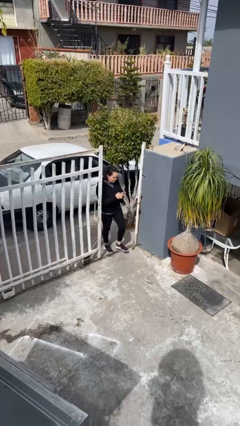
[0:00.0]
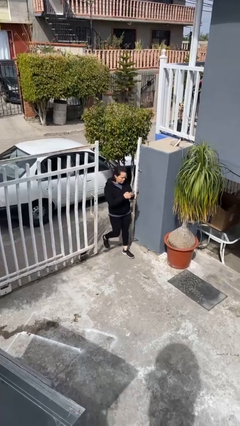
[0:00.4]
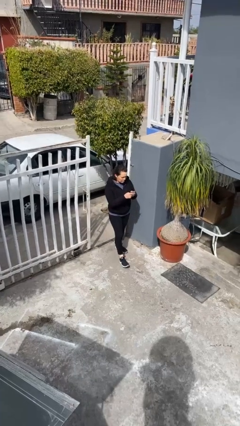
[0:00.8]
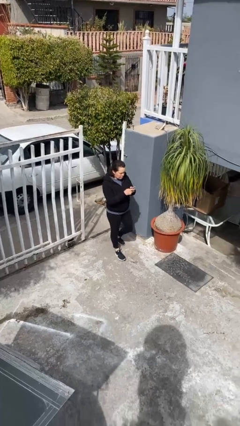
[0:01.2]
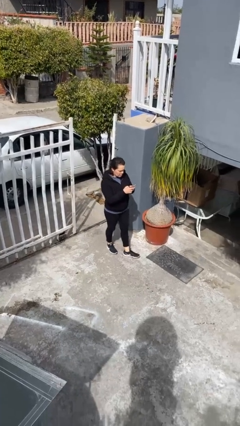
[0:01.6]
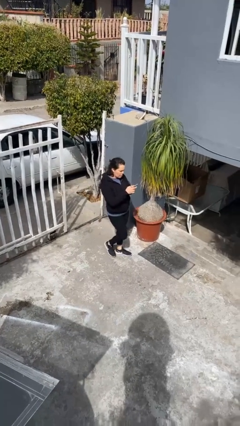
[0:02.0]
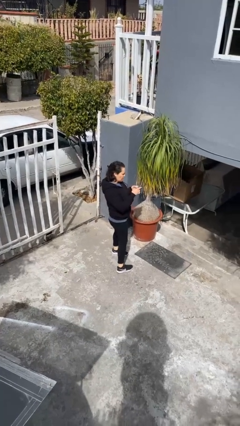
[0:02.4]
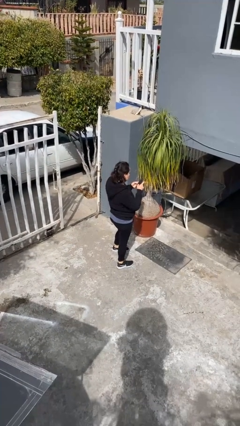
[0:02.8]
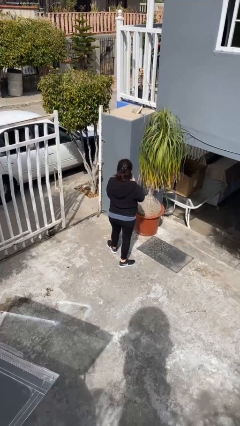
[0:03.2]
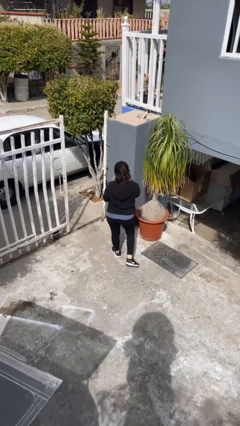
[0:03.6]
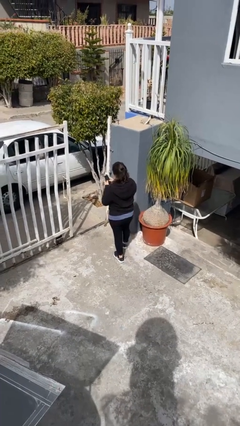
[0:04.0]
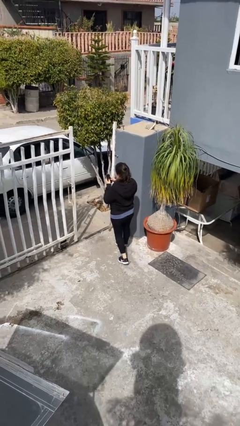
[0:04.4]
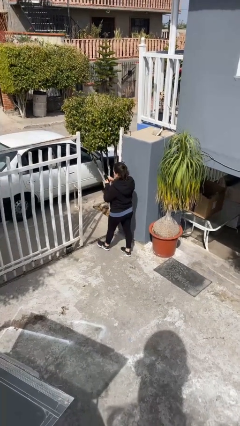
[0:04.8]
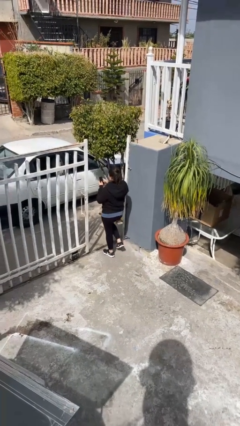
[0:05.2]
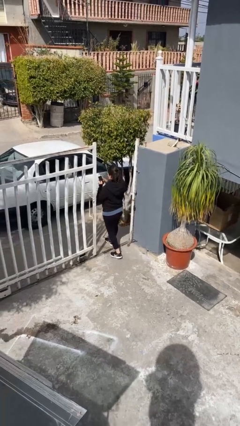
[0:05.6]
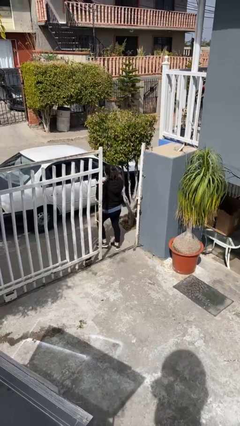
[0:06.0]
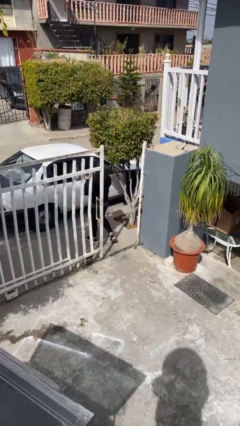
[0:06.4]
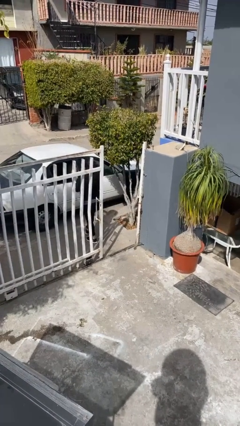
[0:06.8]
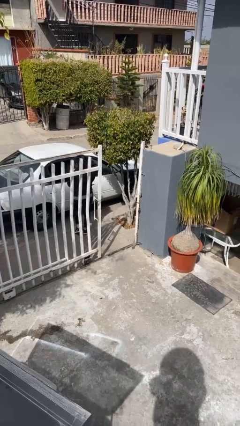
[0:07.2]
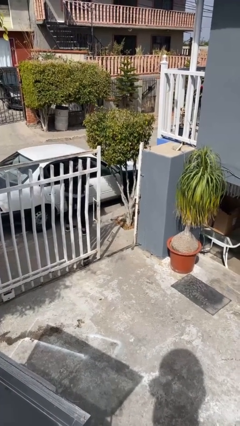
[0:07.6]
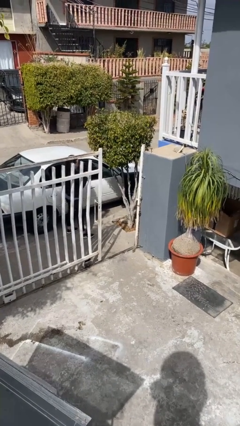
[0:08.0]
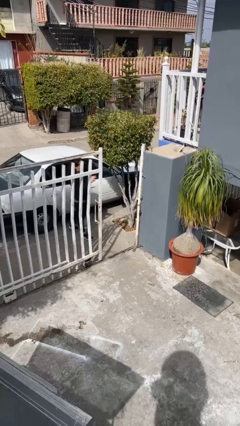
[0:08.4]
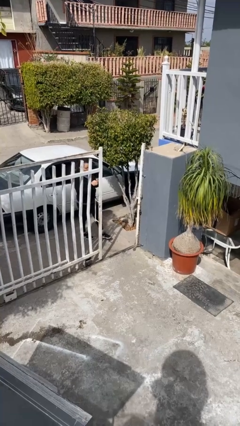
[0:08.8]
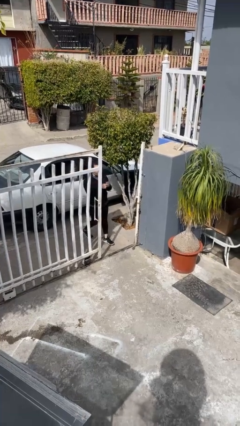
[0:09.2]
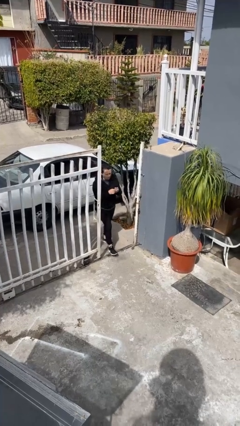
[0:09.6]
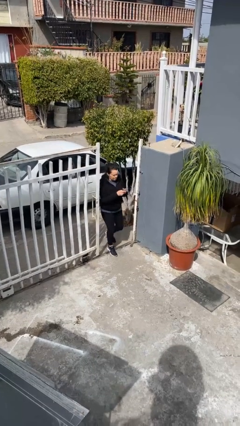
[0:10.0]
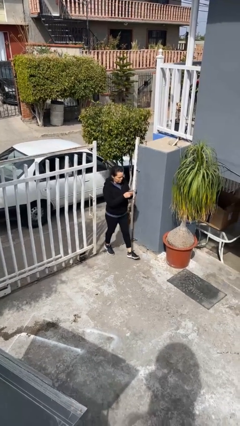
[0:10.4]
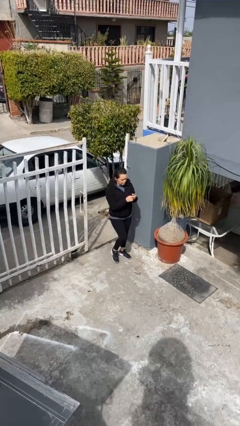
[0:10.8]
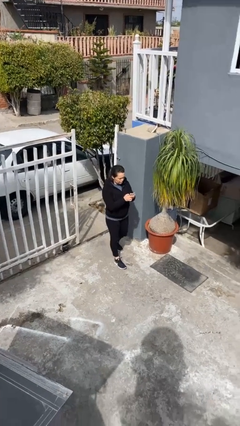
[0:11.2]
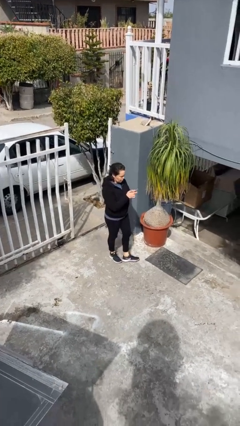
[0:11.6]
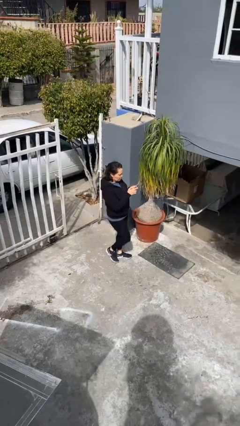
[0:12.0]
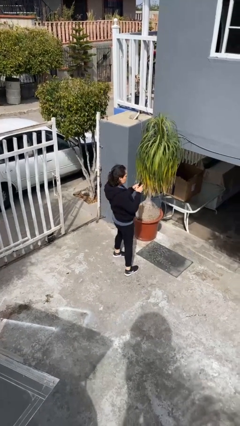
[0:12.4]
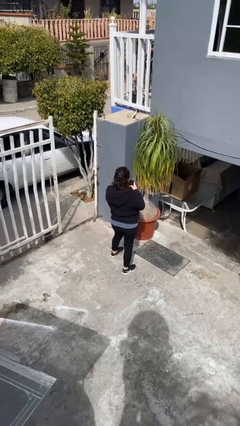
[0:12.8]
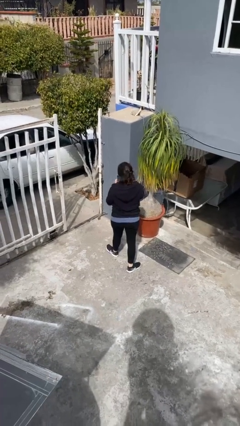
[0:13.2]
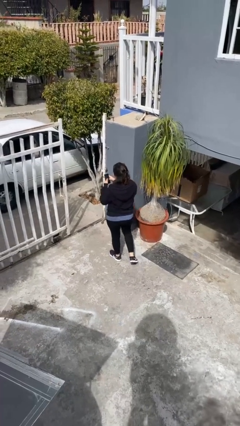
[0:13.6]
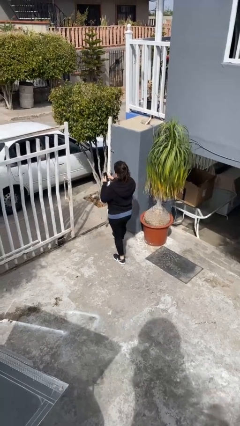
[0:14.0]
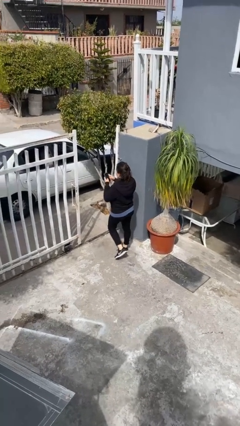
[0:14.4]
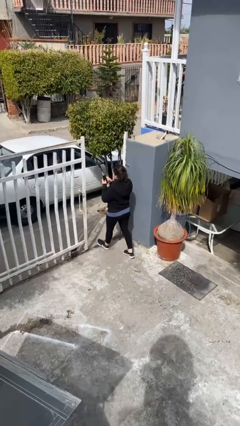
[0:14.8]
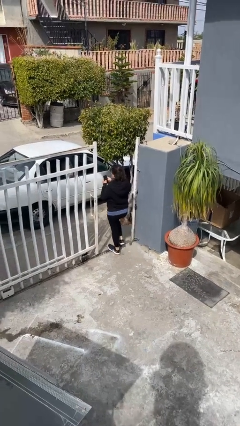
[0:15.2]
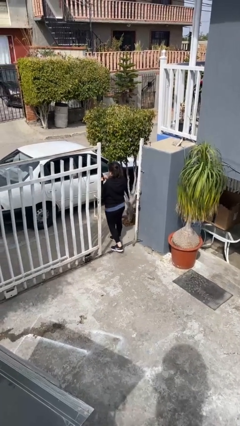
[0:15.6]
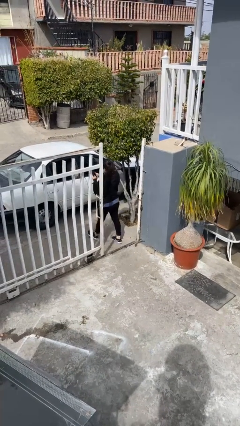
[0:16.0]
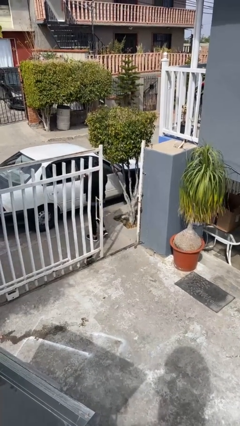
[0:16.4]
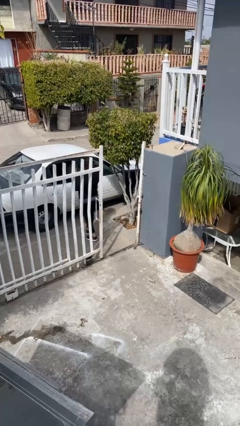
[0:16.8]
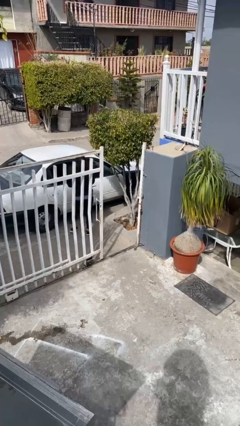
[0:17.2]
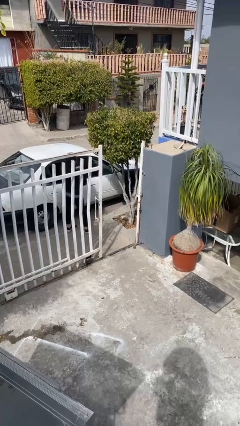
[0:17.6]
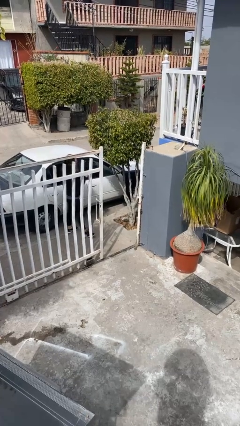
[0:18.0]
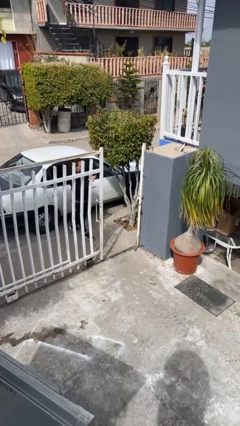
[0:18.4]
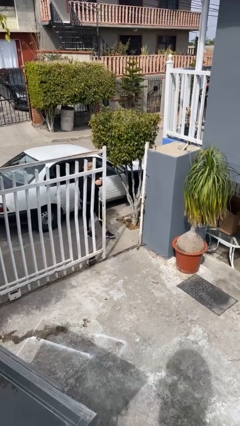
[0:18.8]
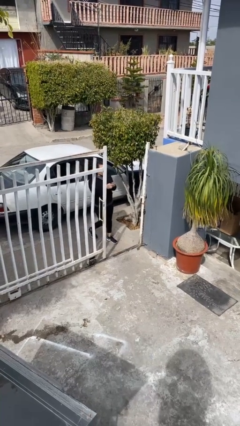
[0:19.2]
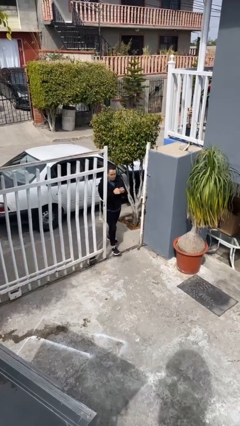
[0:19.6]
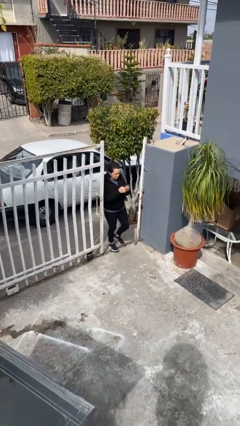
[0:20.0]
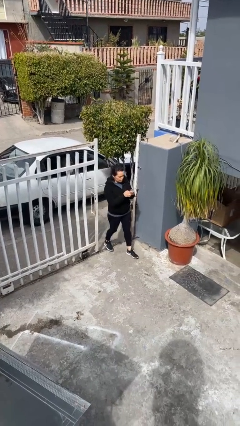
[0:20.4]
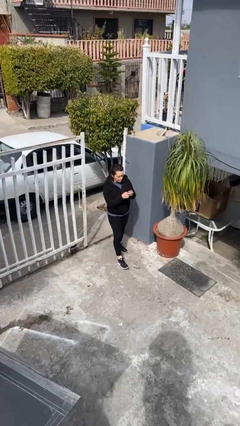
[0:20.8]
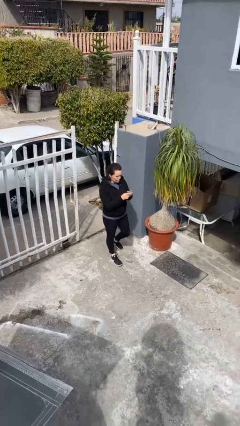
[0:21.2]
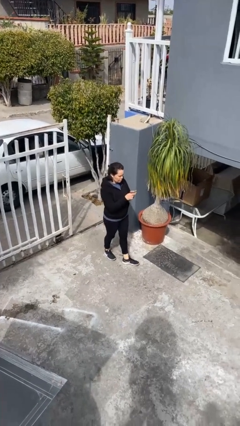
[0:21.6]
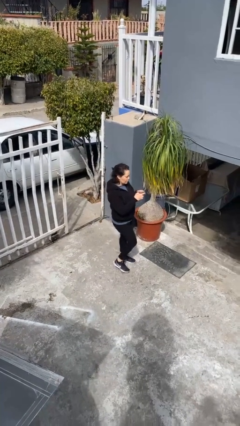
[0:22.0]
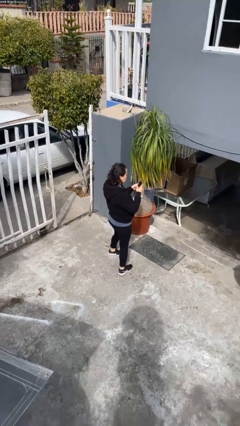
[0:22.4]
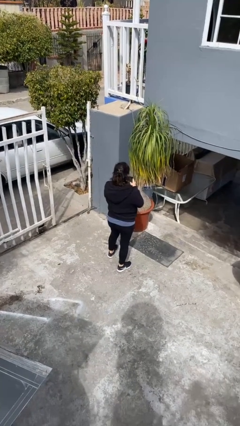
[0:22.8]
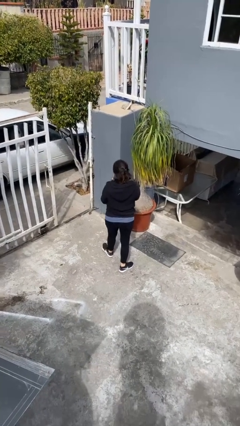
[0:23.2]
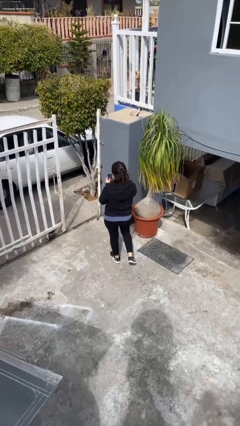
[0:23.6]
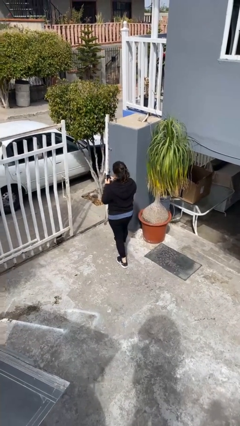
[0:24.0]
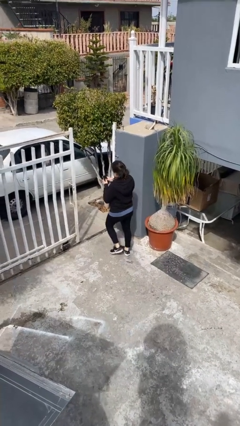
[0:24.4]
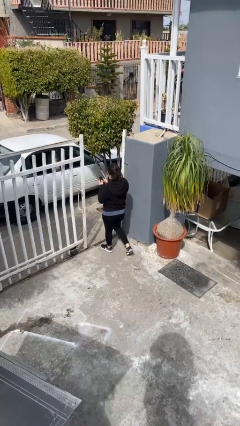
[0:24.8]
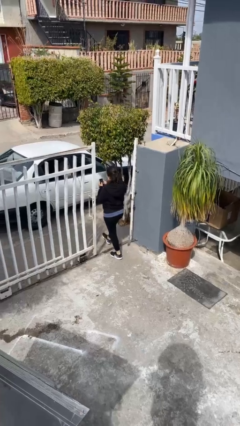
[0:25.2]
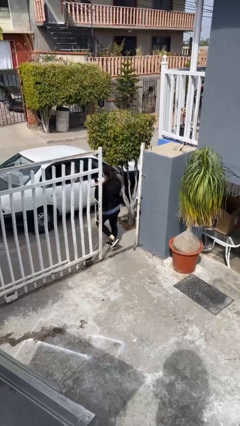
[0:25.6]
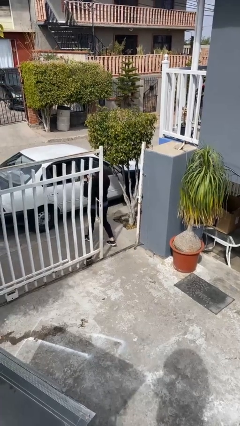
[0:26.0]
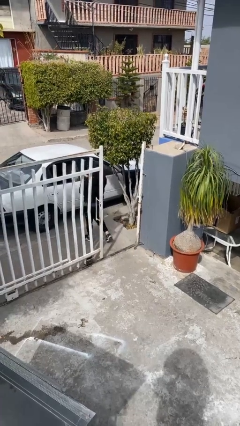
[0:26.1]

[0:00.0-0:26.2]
person texts on phone

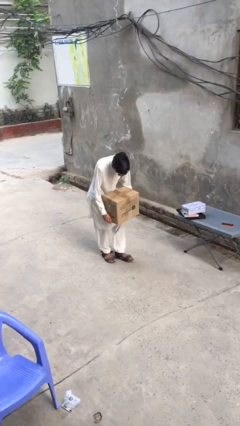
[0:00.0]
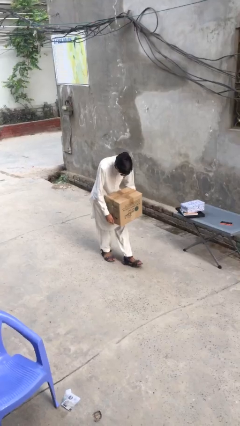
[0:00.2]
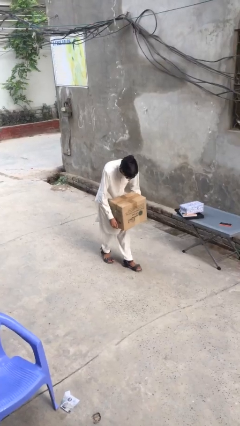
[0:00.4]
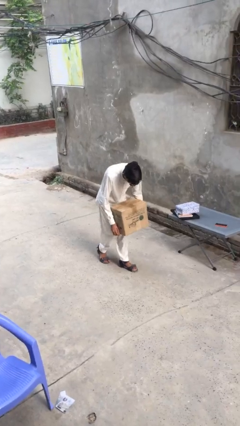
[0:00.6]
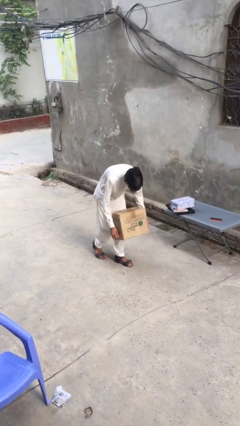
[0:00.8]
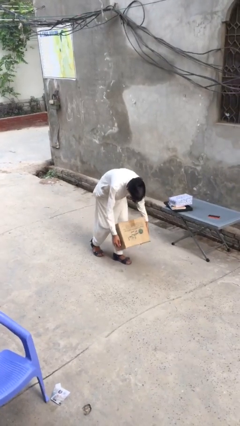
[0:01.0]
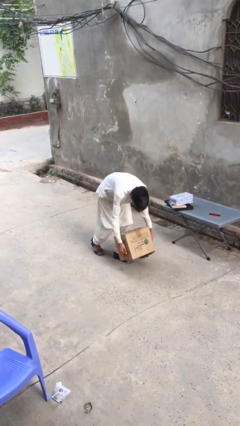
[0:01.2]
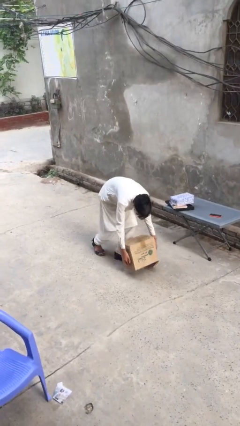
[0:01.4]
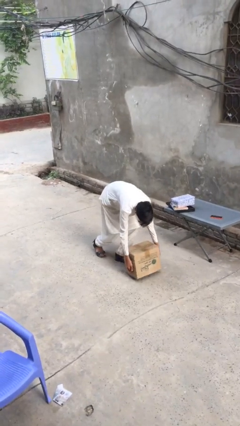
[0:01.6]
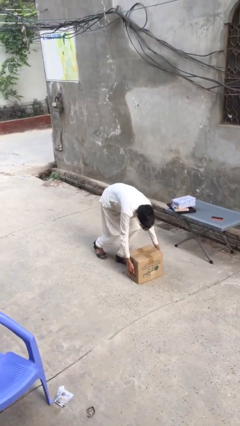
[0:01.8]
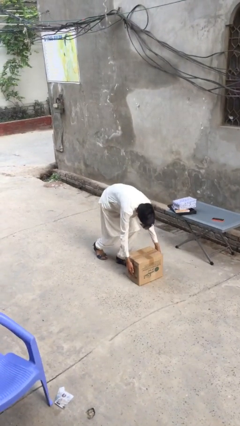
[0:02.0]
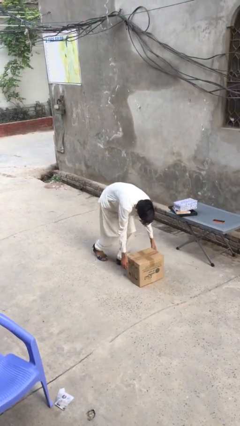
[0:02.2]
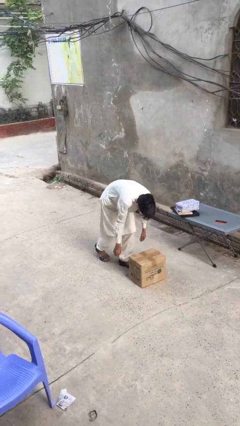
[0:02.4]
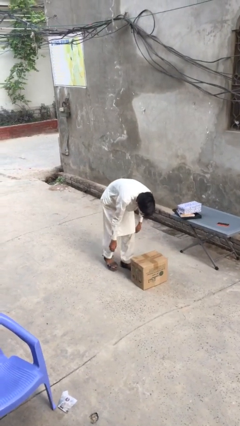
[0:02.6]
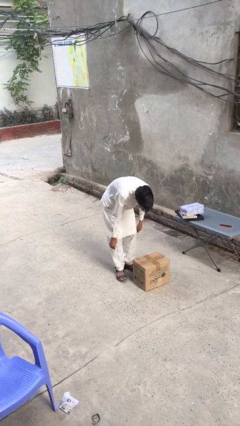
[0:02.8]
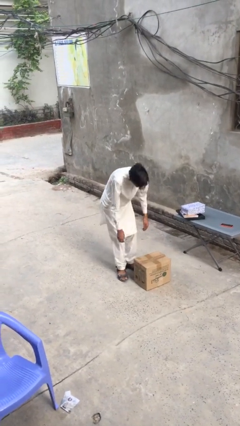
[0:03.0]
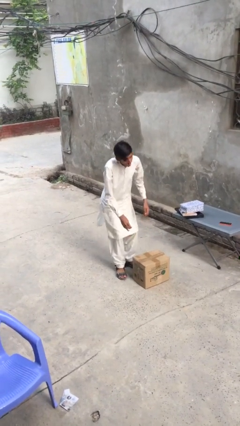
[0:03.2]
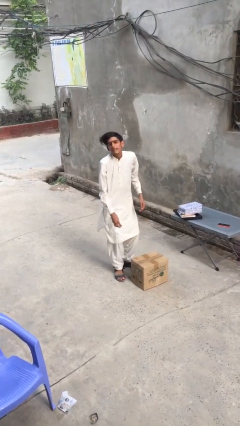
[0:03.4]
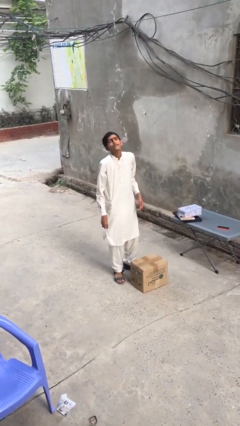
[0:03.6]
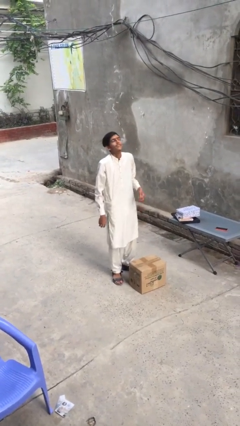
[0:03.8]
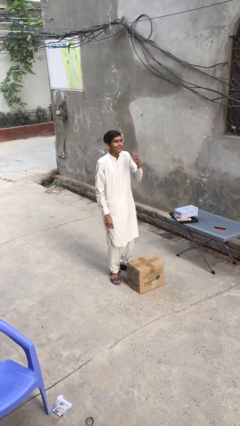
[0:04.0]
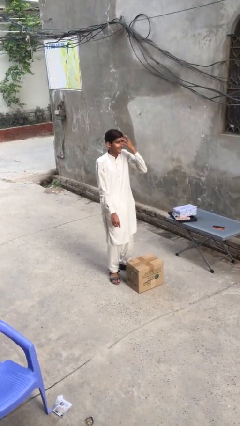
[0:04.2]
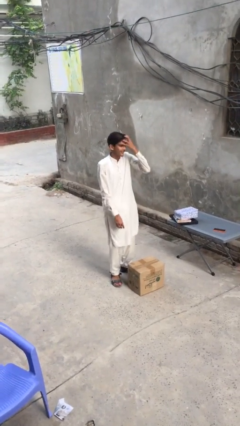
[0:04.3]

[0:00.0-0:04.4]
person puts down object on floor

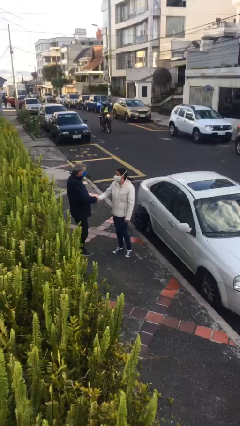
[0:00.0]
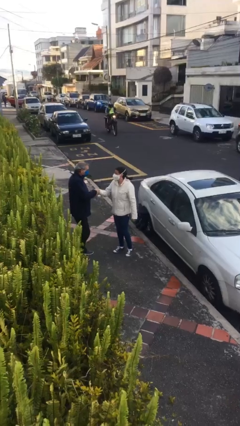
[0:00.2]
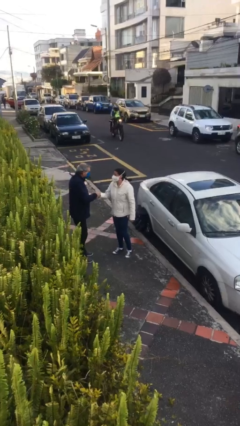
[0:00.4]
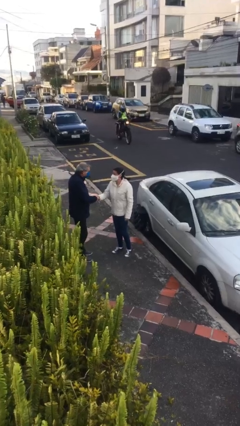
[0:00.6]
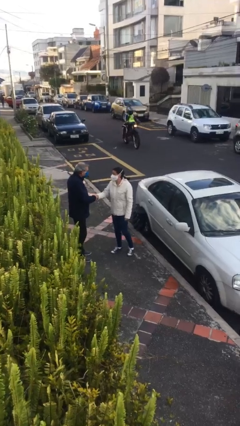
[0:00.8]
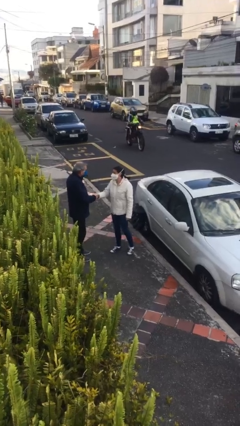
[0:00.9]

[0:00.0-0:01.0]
person shakes hand
